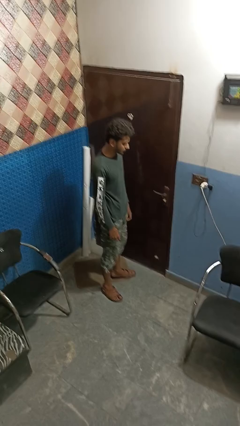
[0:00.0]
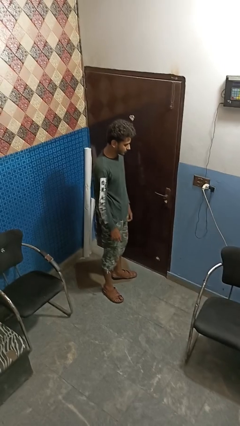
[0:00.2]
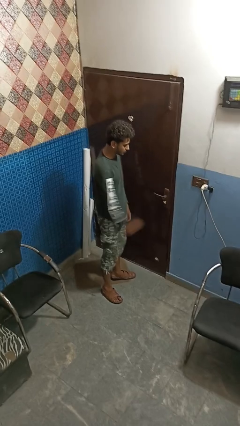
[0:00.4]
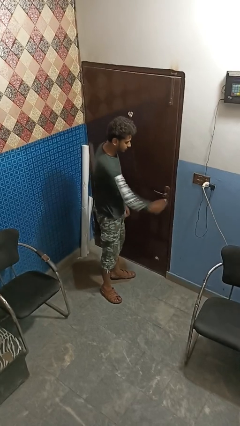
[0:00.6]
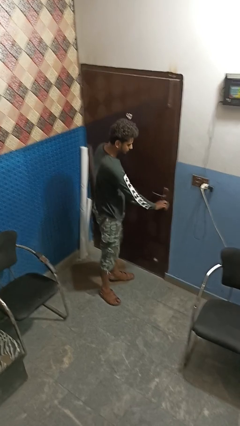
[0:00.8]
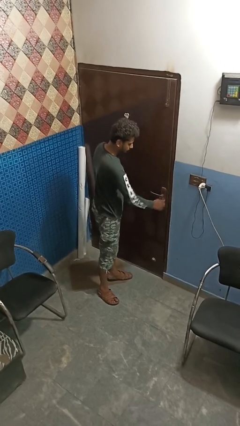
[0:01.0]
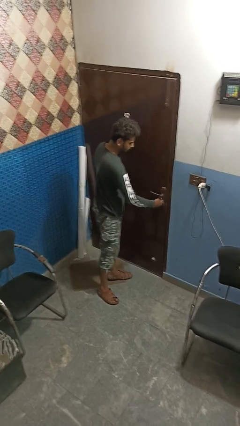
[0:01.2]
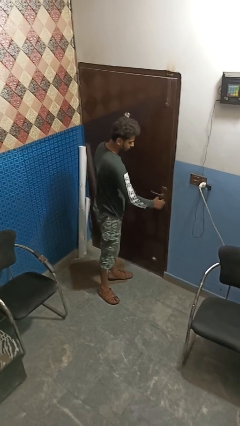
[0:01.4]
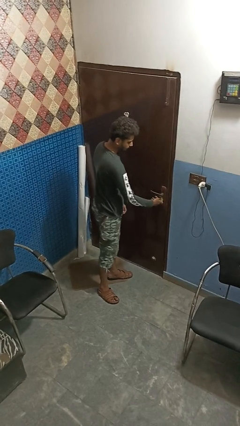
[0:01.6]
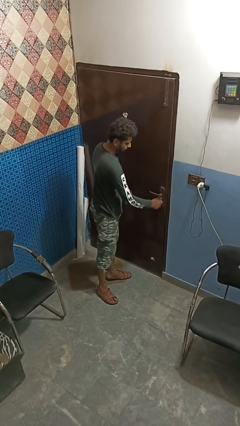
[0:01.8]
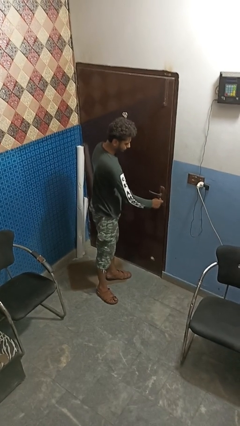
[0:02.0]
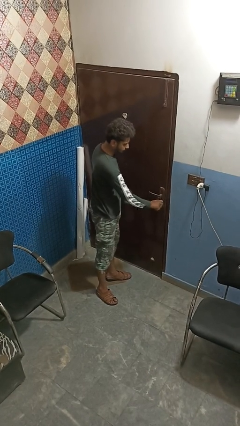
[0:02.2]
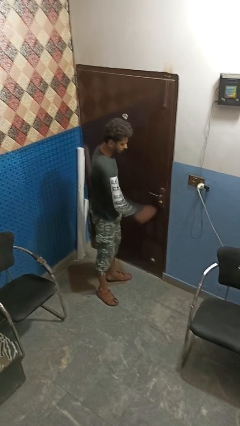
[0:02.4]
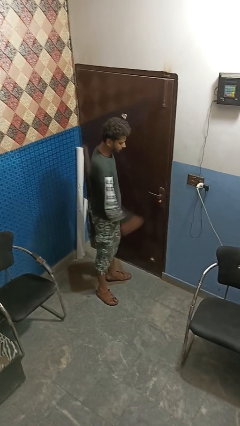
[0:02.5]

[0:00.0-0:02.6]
person unlocks door with keys

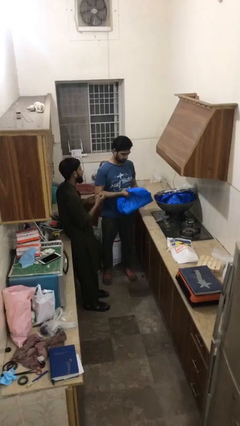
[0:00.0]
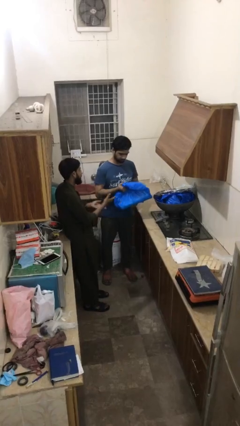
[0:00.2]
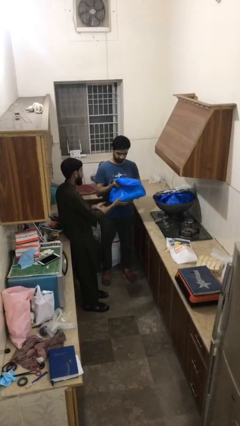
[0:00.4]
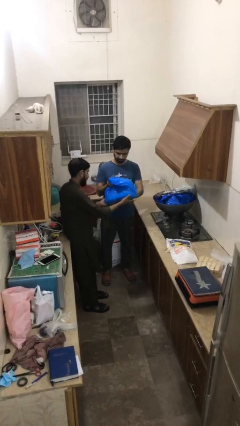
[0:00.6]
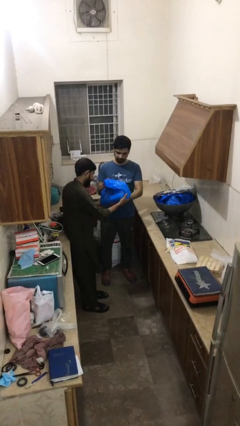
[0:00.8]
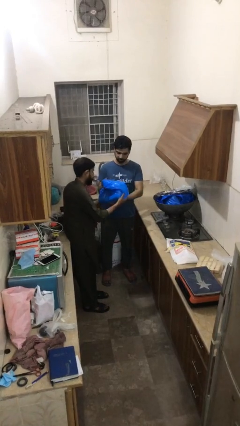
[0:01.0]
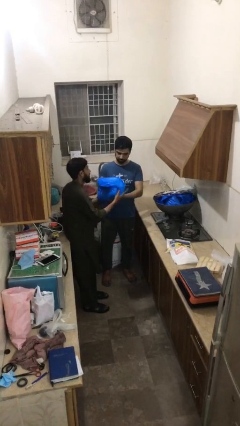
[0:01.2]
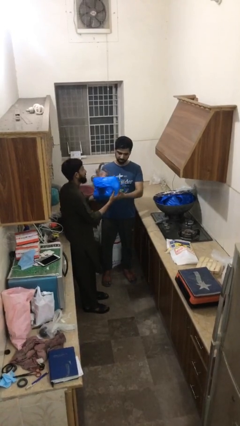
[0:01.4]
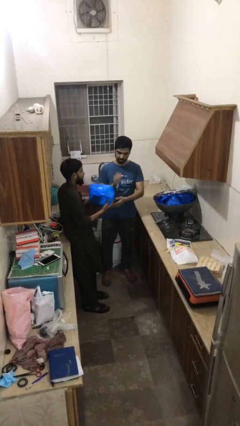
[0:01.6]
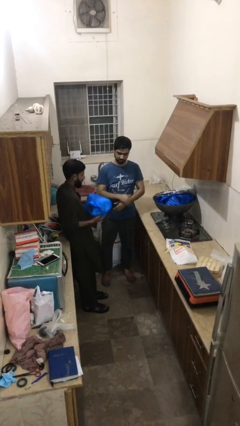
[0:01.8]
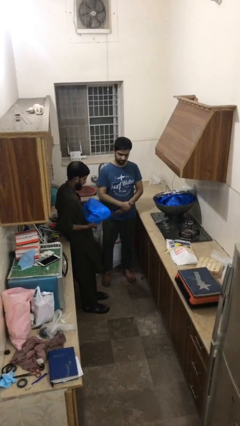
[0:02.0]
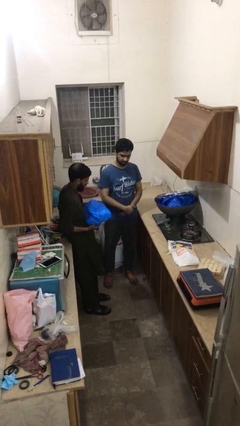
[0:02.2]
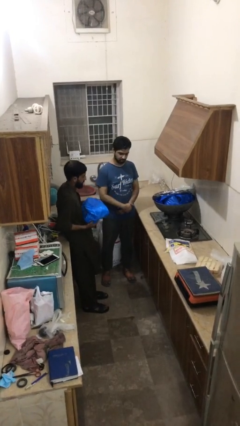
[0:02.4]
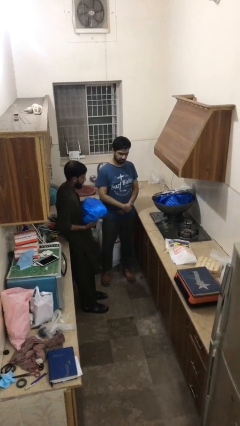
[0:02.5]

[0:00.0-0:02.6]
person transfers object to person

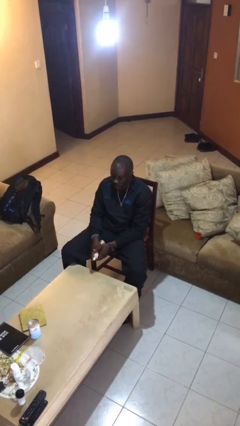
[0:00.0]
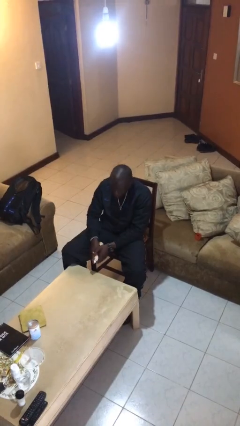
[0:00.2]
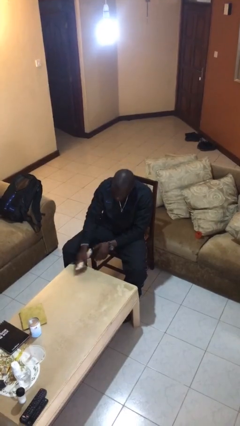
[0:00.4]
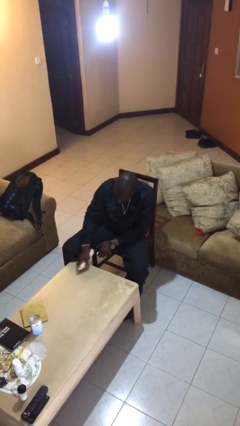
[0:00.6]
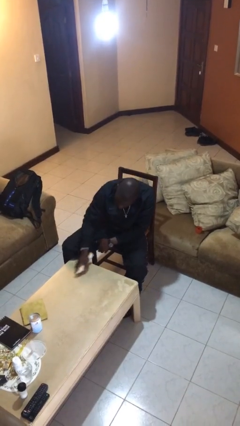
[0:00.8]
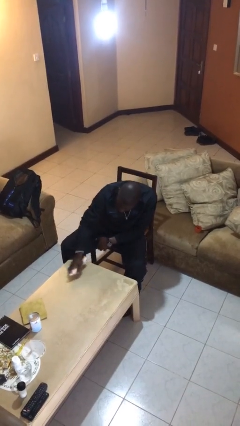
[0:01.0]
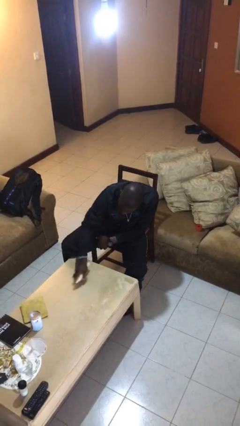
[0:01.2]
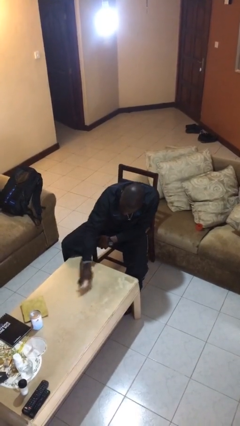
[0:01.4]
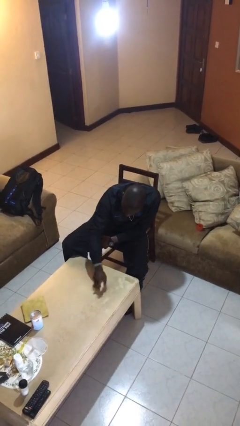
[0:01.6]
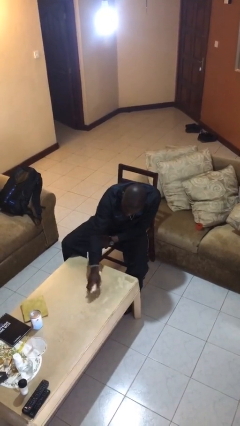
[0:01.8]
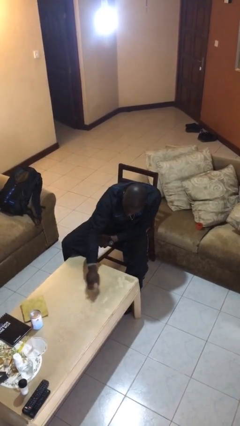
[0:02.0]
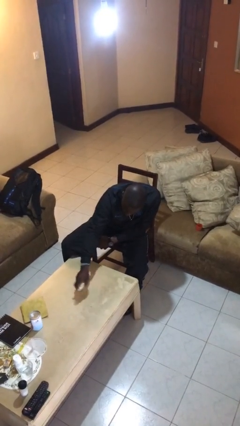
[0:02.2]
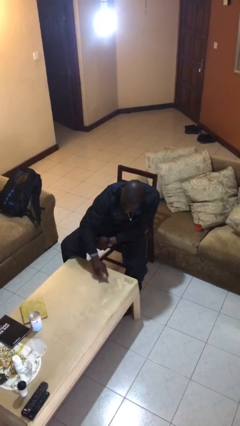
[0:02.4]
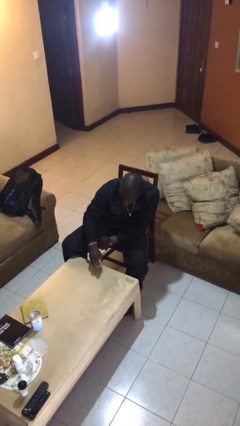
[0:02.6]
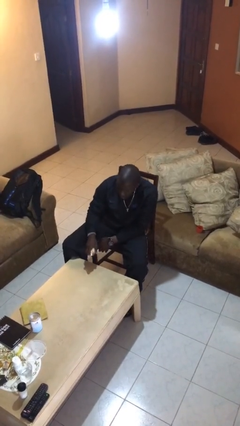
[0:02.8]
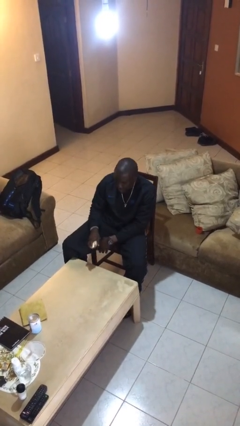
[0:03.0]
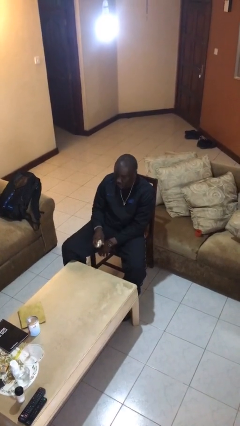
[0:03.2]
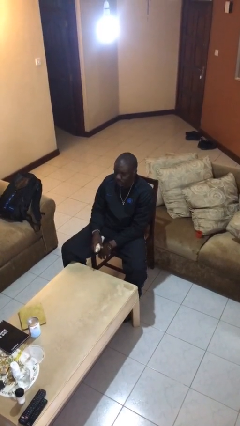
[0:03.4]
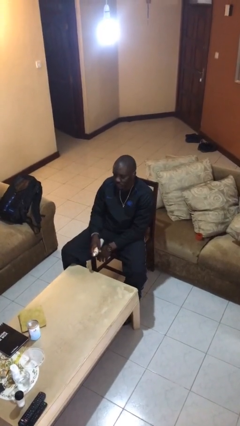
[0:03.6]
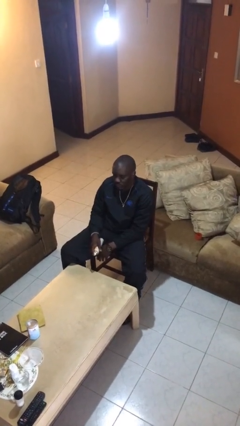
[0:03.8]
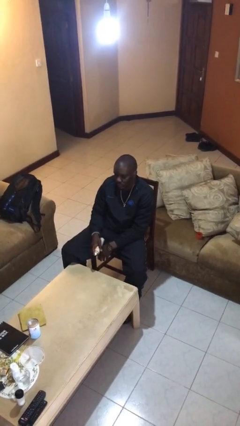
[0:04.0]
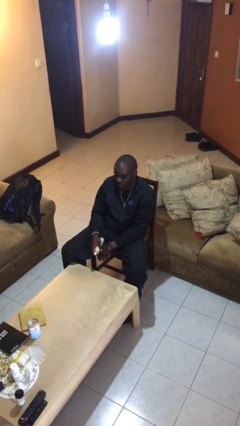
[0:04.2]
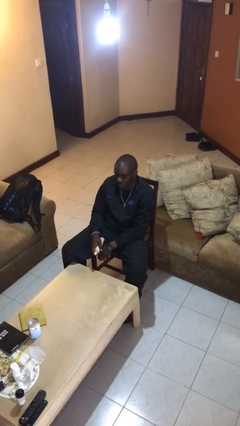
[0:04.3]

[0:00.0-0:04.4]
person sprays from bottle

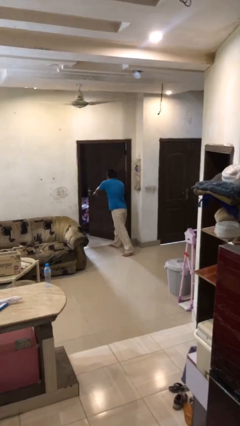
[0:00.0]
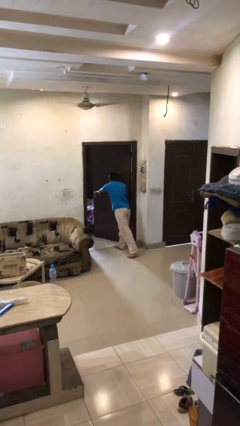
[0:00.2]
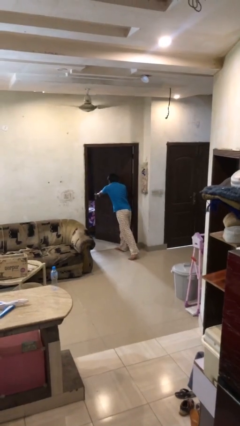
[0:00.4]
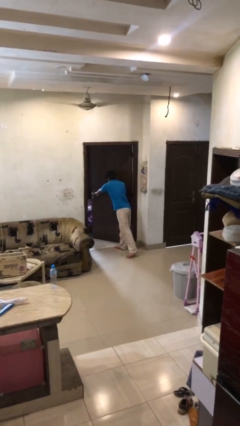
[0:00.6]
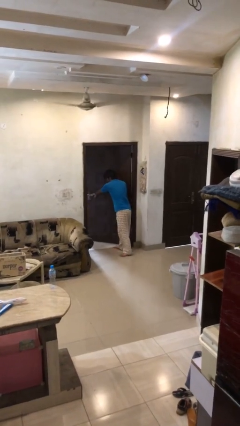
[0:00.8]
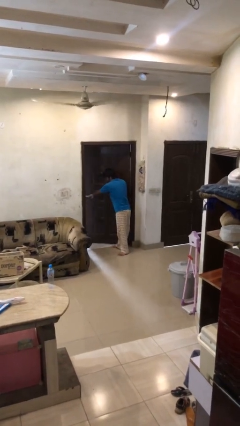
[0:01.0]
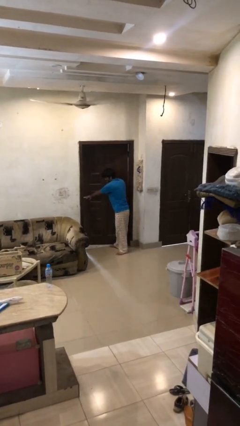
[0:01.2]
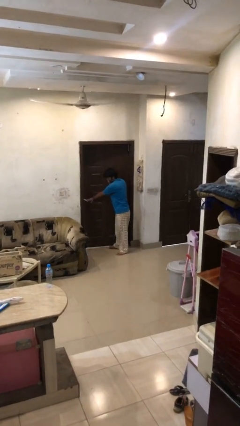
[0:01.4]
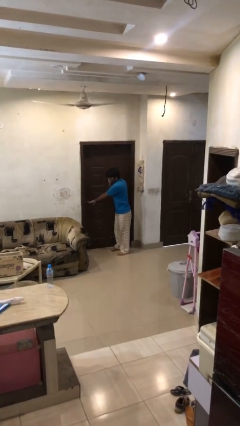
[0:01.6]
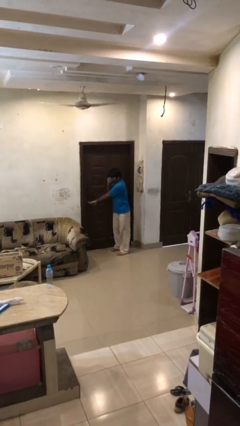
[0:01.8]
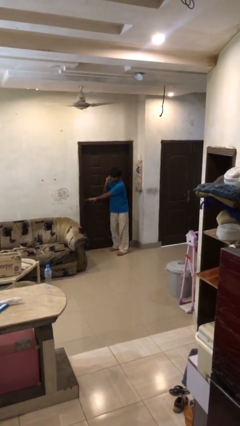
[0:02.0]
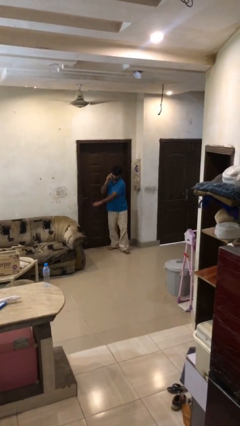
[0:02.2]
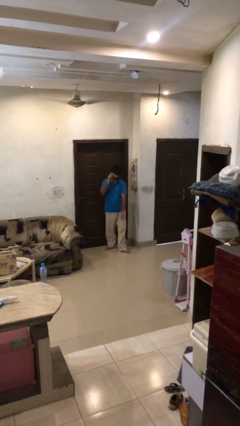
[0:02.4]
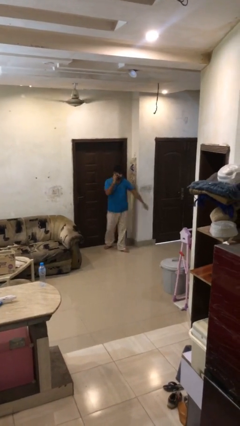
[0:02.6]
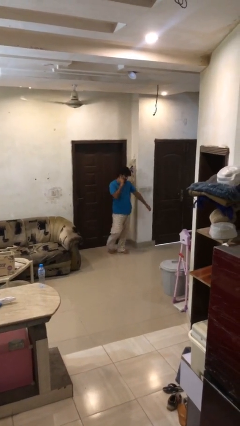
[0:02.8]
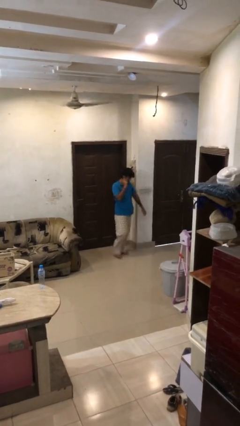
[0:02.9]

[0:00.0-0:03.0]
person closes facility door

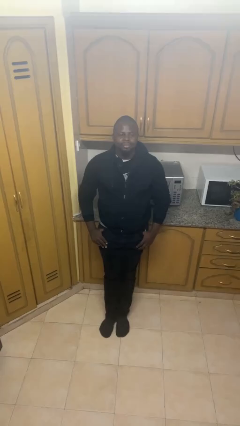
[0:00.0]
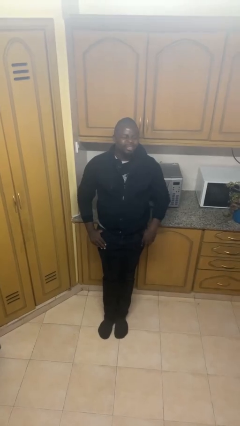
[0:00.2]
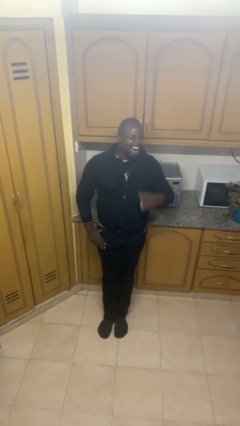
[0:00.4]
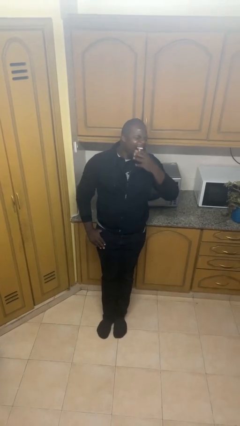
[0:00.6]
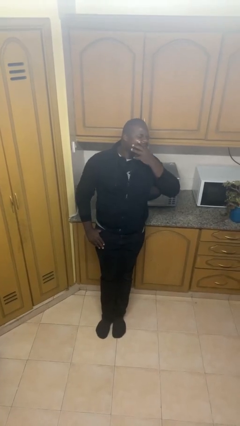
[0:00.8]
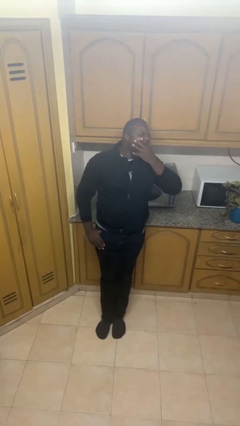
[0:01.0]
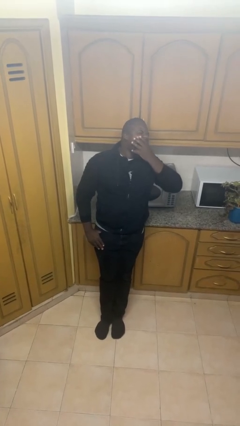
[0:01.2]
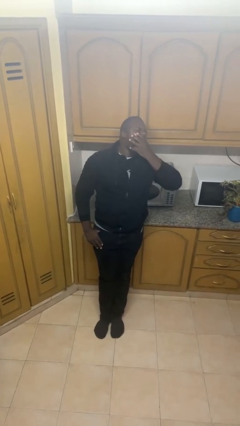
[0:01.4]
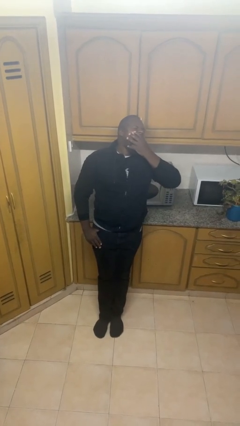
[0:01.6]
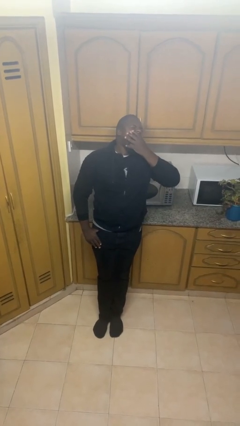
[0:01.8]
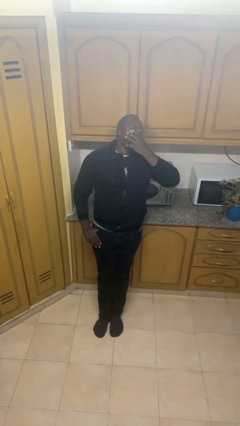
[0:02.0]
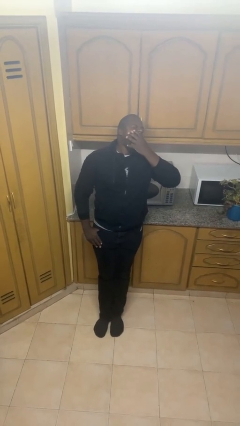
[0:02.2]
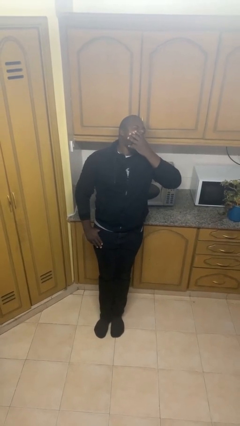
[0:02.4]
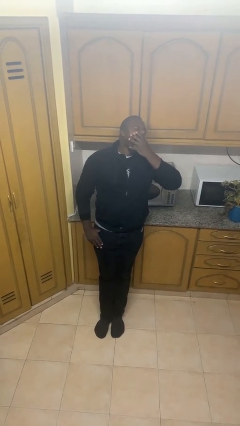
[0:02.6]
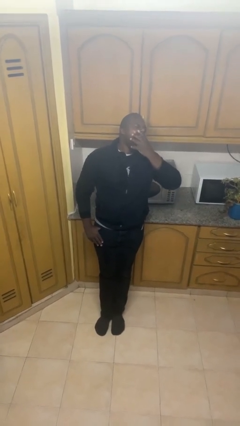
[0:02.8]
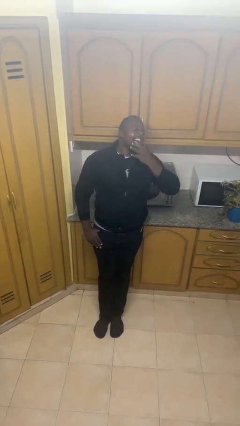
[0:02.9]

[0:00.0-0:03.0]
person yawns

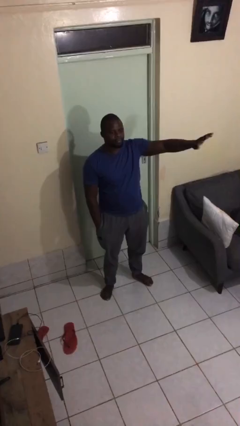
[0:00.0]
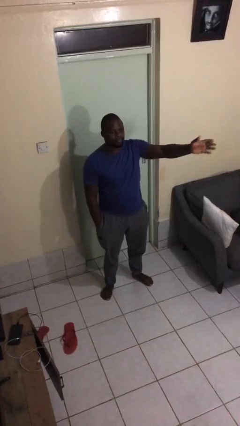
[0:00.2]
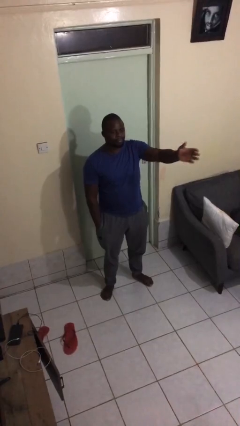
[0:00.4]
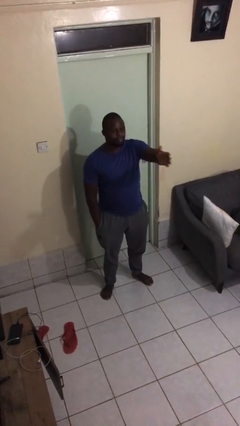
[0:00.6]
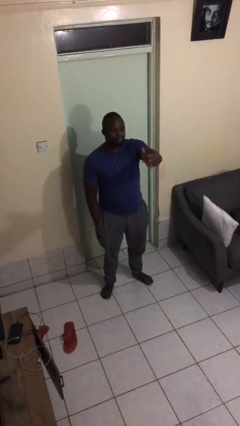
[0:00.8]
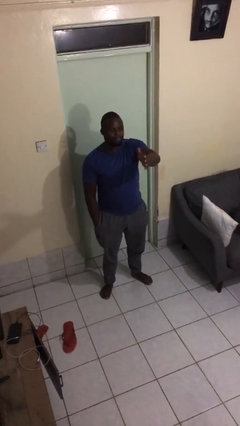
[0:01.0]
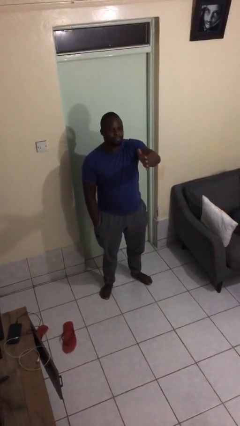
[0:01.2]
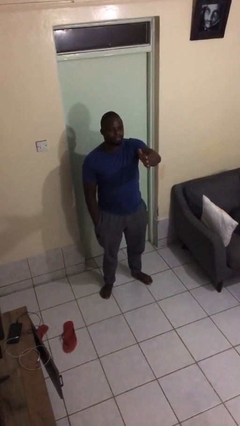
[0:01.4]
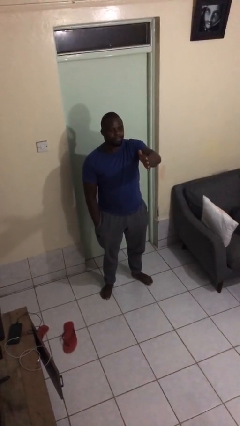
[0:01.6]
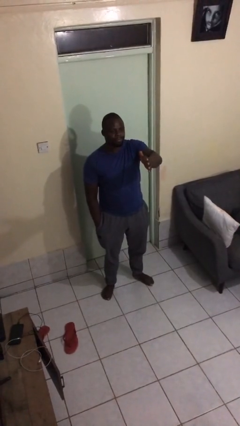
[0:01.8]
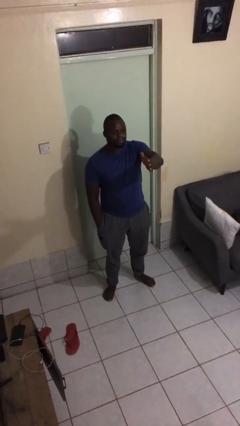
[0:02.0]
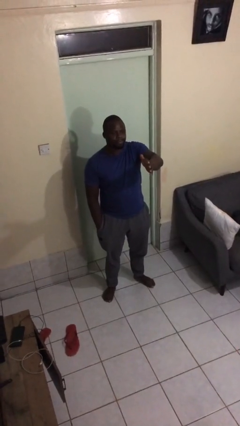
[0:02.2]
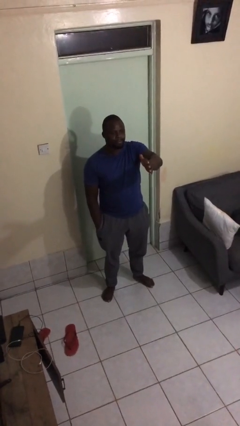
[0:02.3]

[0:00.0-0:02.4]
person gestures swipe right
